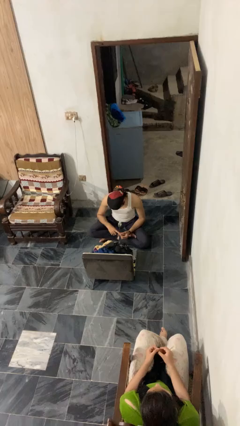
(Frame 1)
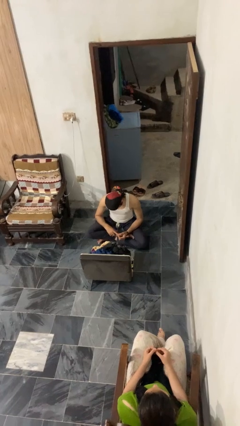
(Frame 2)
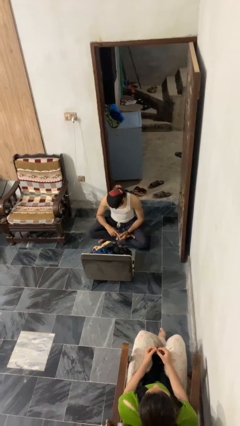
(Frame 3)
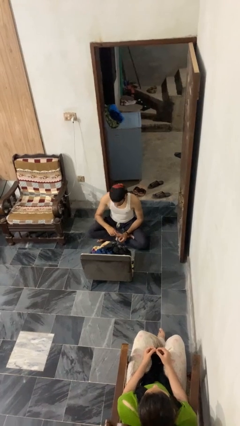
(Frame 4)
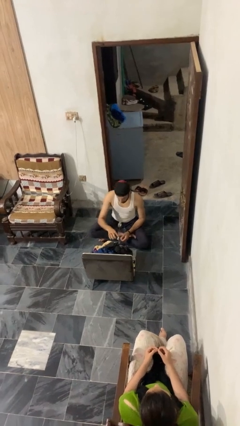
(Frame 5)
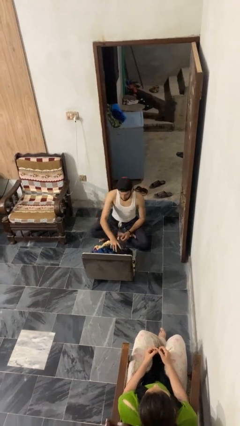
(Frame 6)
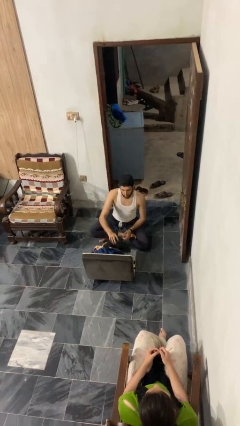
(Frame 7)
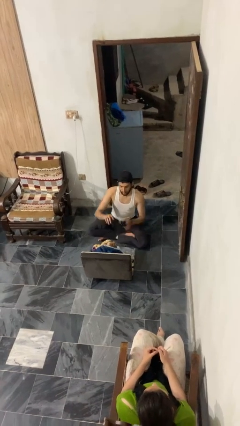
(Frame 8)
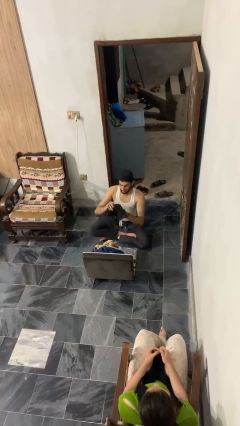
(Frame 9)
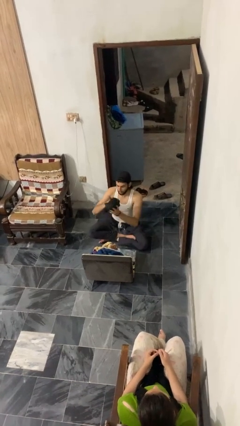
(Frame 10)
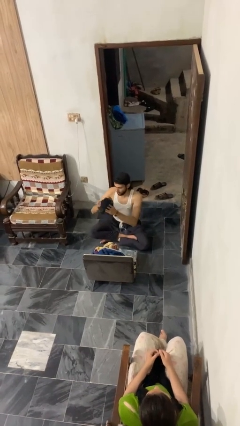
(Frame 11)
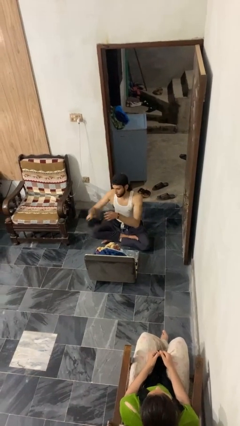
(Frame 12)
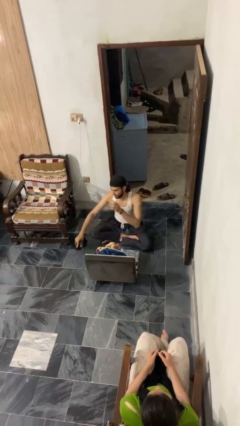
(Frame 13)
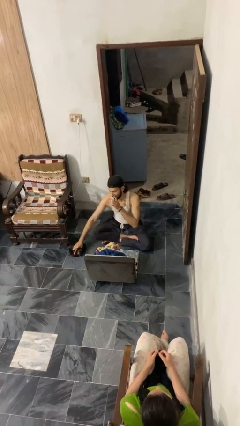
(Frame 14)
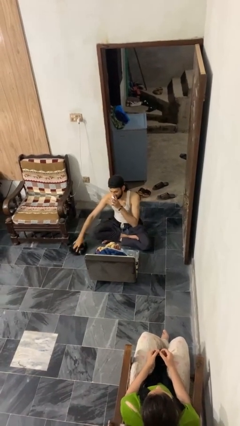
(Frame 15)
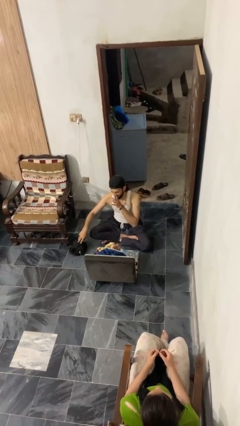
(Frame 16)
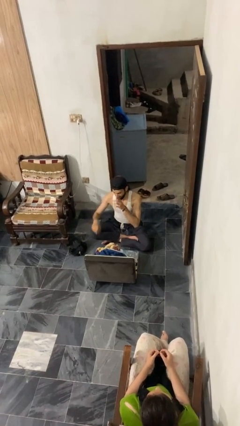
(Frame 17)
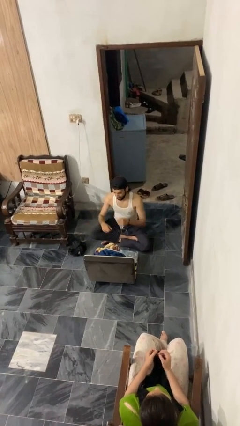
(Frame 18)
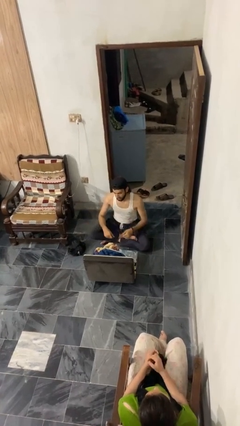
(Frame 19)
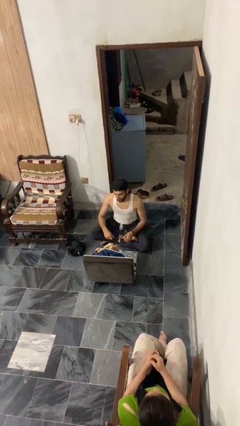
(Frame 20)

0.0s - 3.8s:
person unloads clothes from suitcase

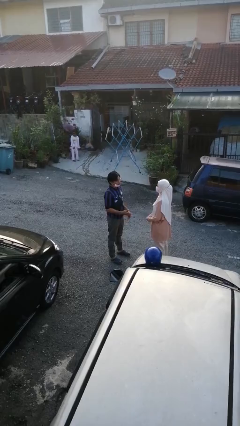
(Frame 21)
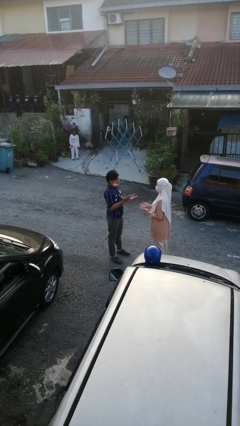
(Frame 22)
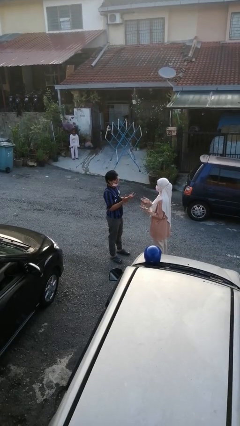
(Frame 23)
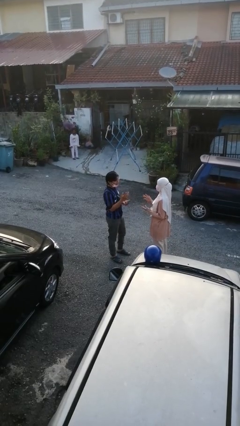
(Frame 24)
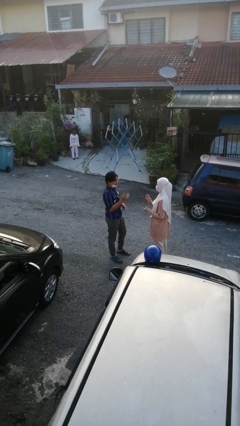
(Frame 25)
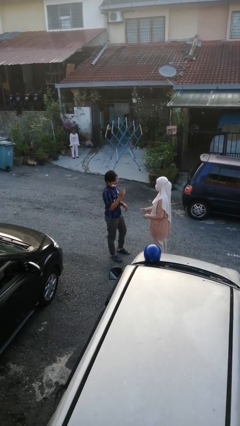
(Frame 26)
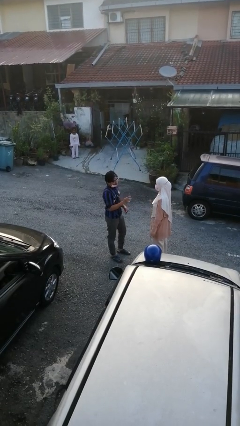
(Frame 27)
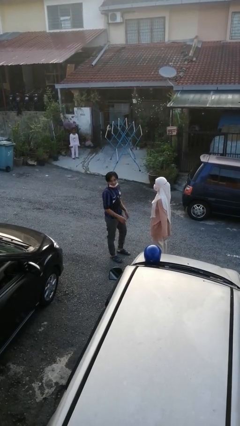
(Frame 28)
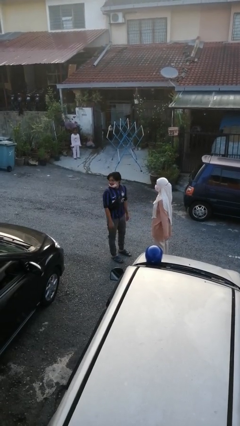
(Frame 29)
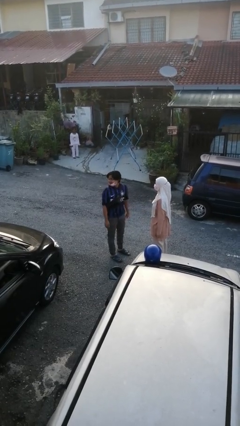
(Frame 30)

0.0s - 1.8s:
person talks to person

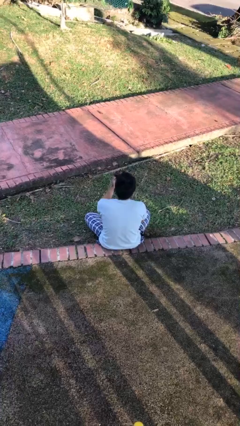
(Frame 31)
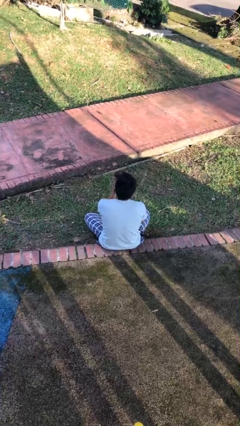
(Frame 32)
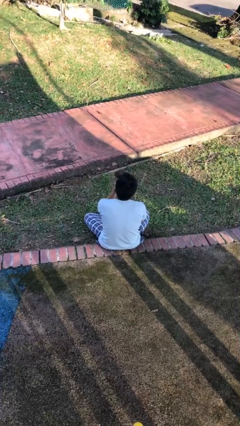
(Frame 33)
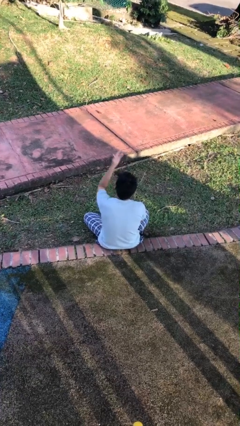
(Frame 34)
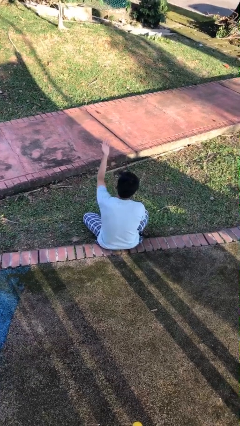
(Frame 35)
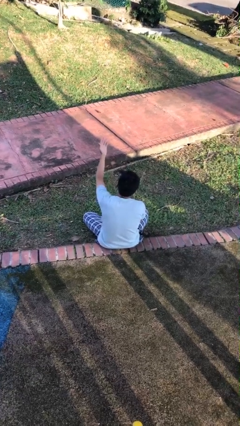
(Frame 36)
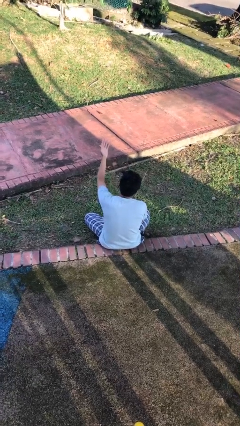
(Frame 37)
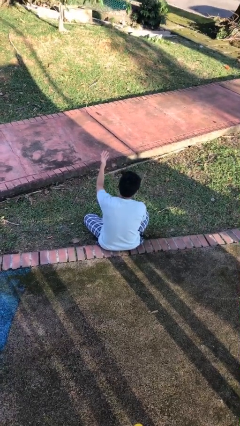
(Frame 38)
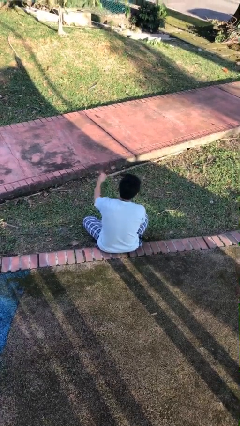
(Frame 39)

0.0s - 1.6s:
person gestures blow kiss

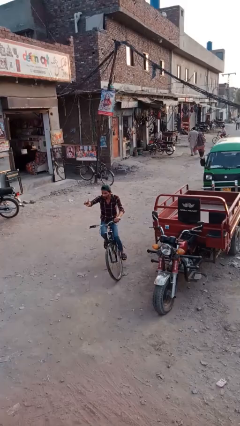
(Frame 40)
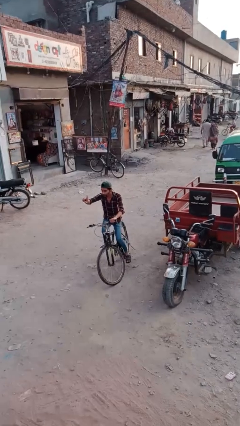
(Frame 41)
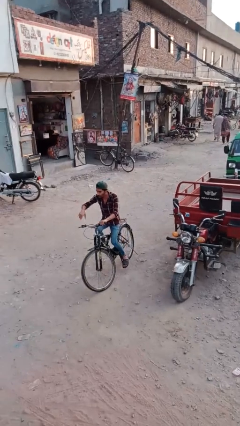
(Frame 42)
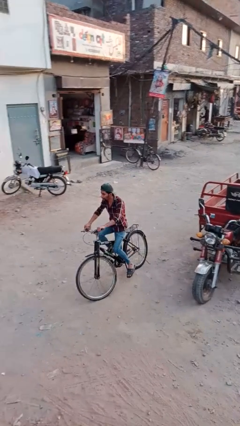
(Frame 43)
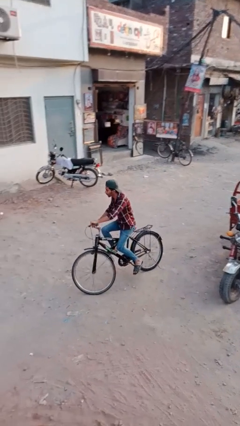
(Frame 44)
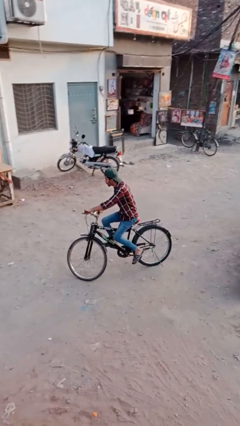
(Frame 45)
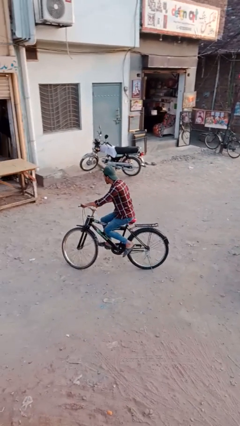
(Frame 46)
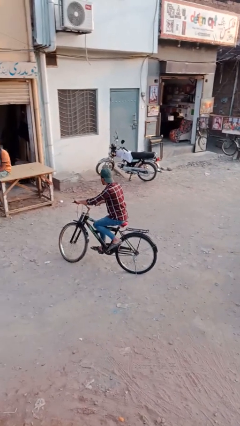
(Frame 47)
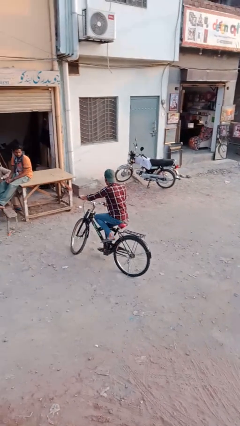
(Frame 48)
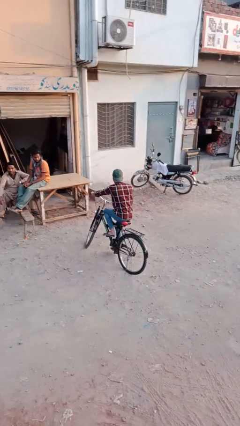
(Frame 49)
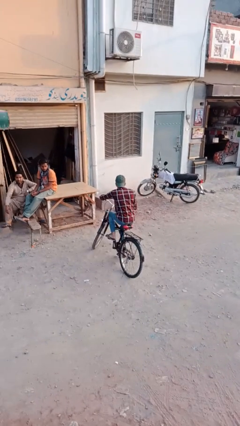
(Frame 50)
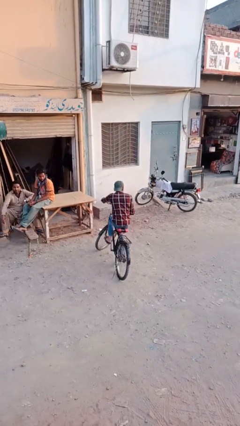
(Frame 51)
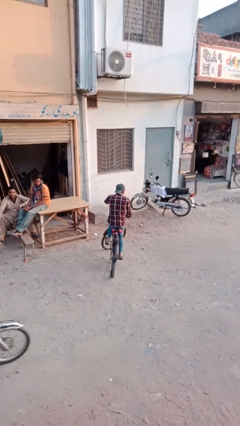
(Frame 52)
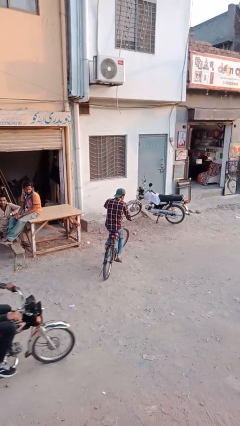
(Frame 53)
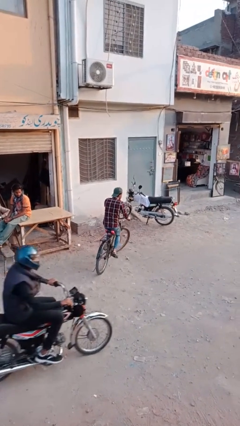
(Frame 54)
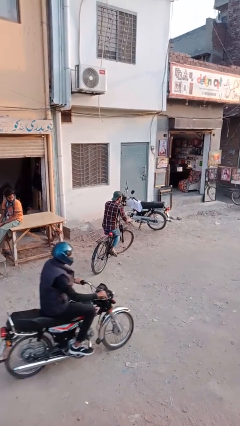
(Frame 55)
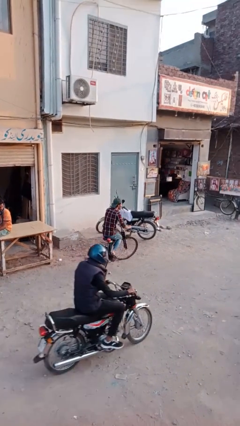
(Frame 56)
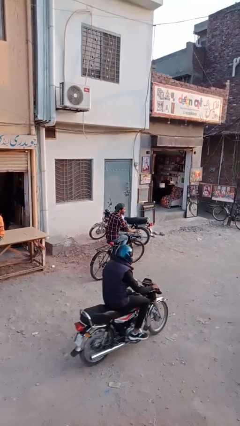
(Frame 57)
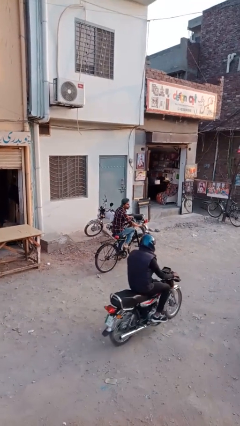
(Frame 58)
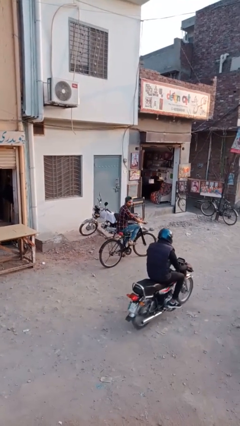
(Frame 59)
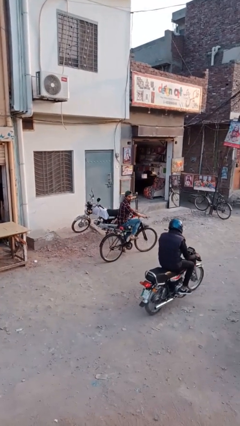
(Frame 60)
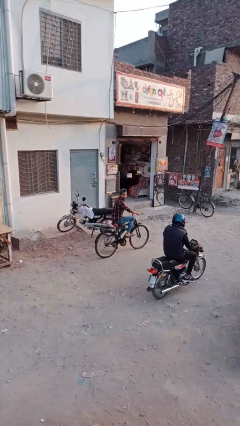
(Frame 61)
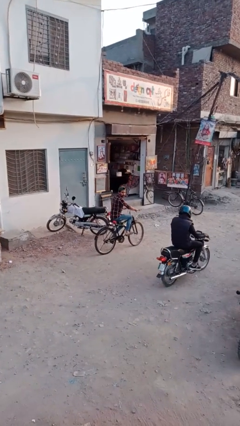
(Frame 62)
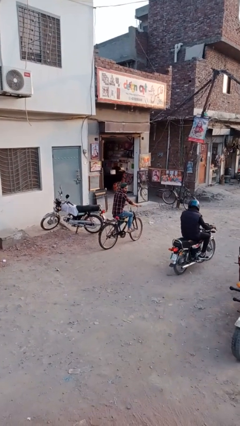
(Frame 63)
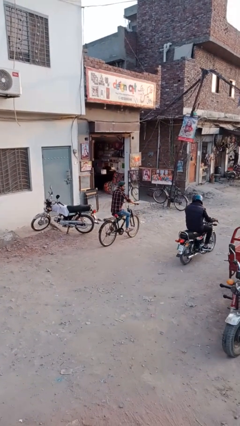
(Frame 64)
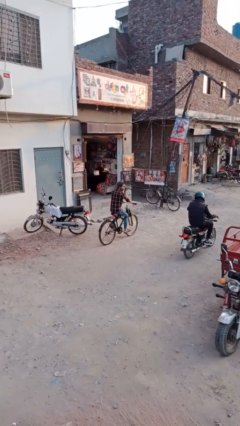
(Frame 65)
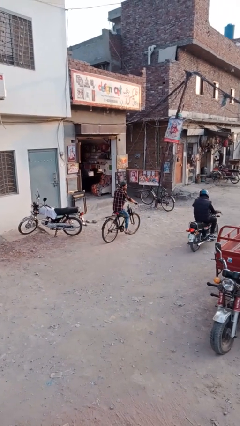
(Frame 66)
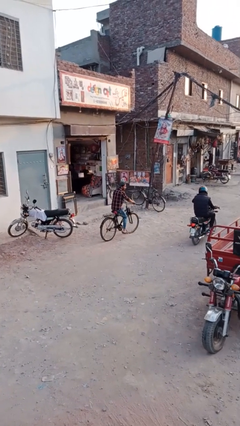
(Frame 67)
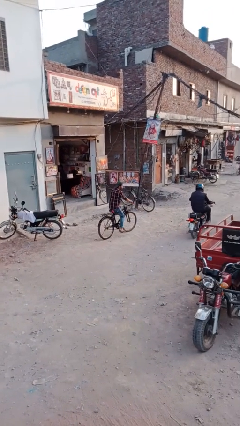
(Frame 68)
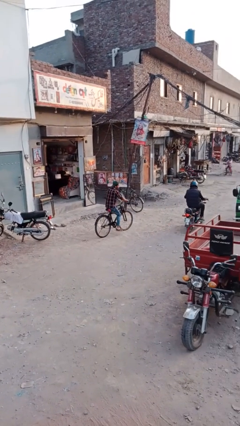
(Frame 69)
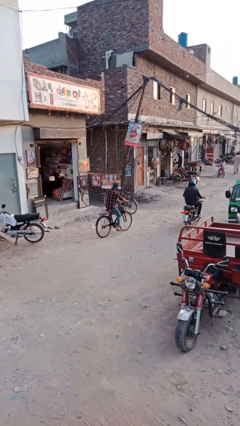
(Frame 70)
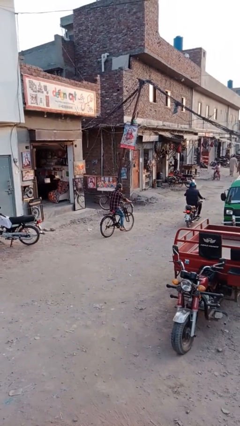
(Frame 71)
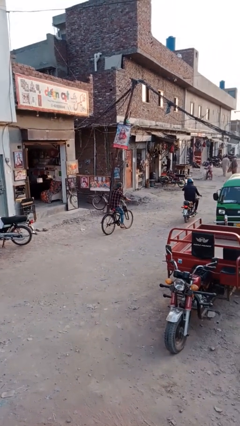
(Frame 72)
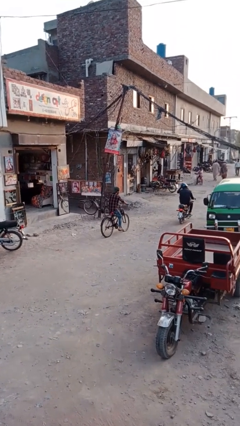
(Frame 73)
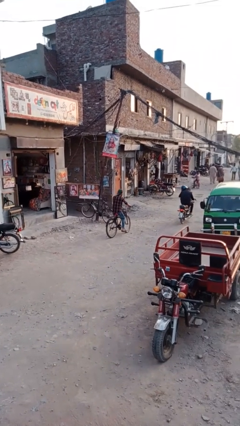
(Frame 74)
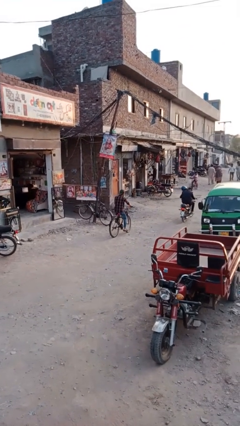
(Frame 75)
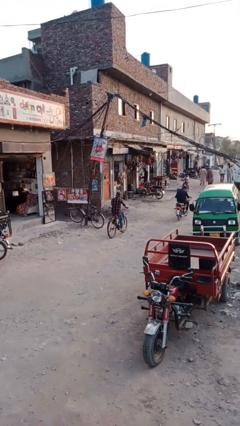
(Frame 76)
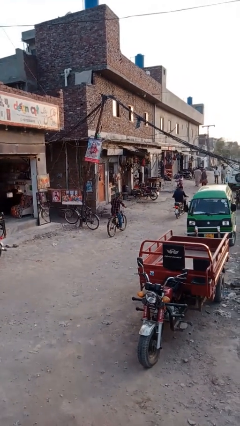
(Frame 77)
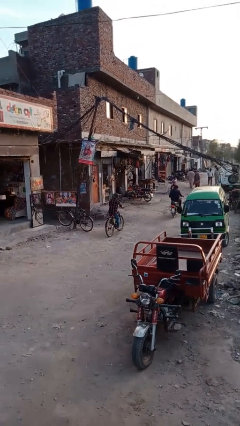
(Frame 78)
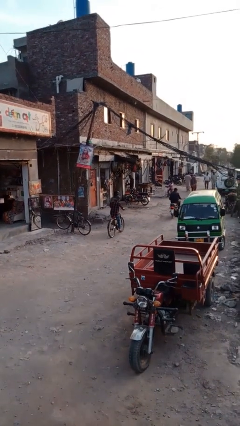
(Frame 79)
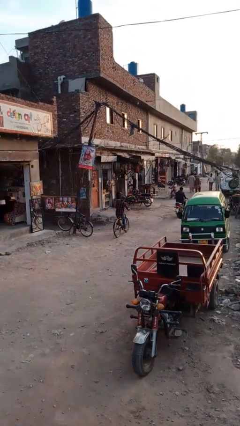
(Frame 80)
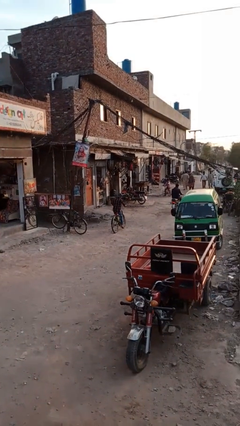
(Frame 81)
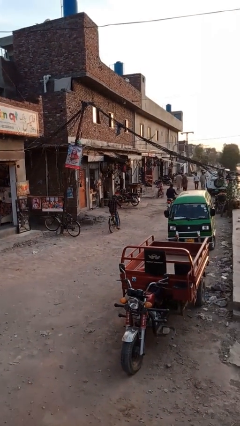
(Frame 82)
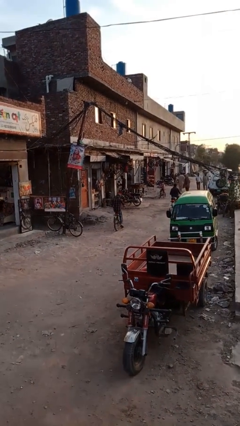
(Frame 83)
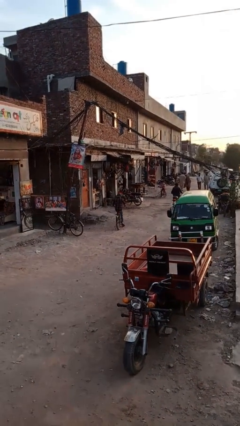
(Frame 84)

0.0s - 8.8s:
person rides bicycle

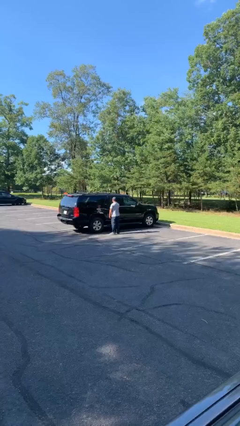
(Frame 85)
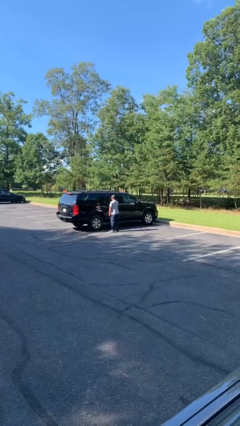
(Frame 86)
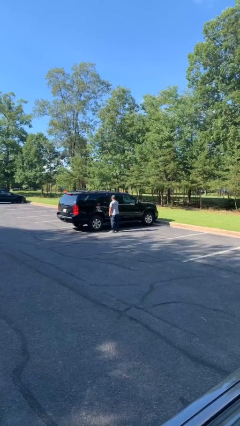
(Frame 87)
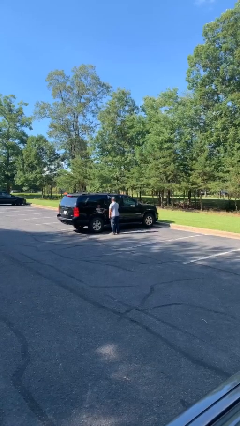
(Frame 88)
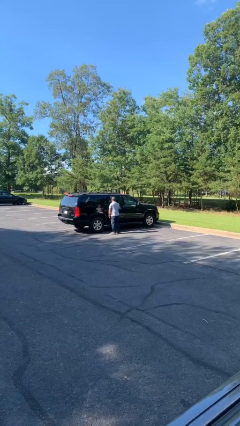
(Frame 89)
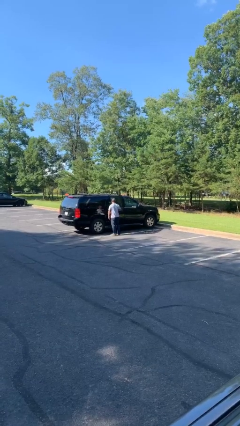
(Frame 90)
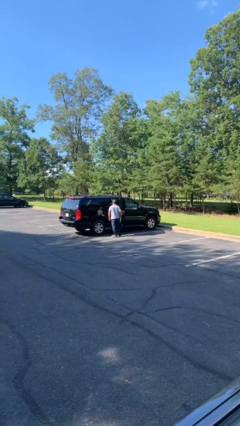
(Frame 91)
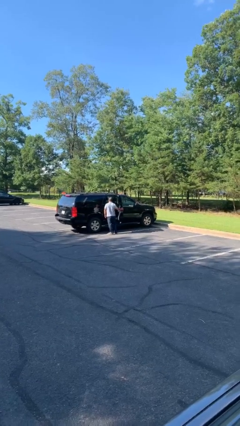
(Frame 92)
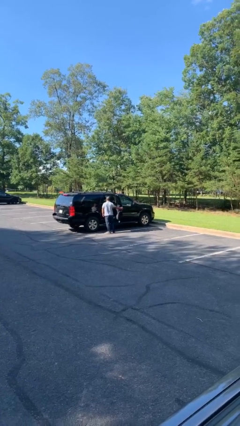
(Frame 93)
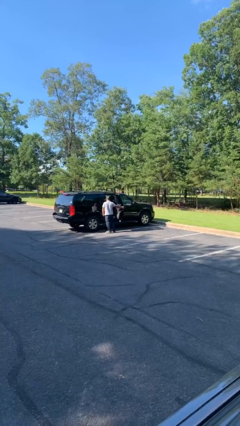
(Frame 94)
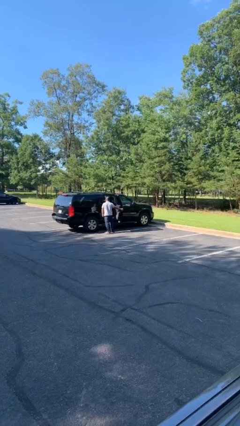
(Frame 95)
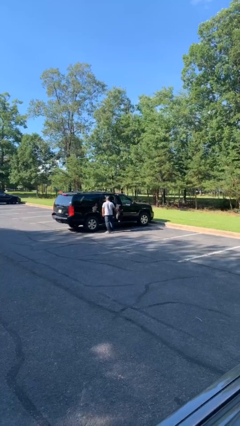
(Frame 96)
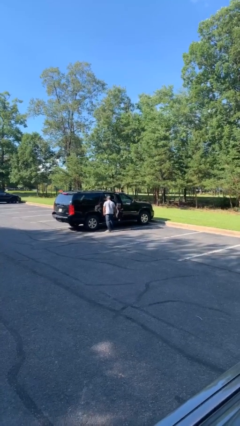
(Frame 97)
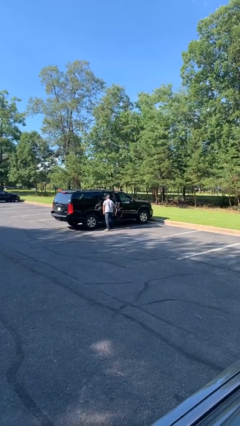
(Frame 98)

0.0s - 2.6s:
person opens car door
